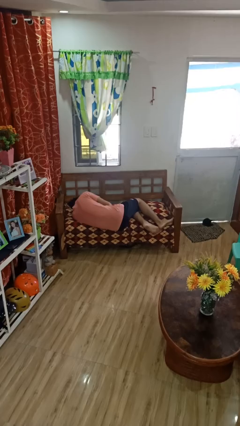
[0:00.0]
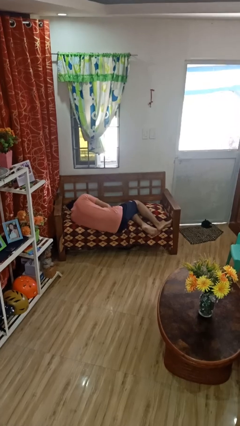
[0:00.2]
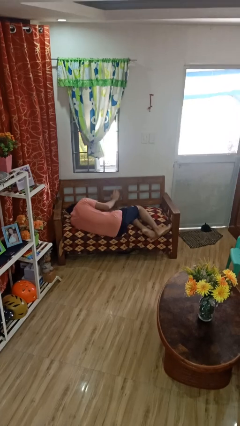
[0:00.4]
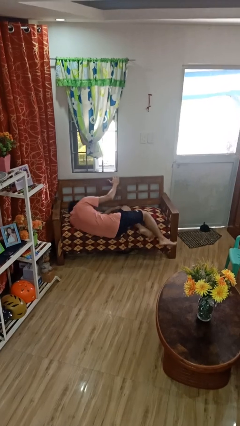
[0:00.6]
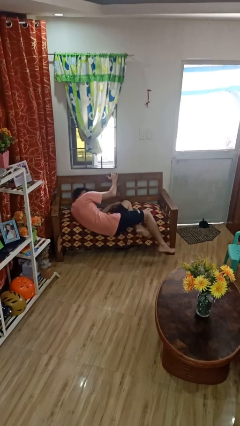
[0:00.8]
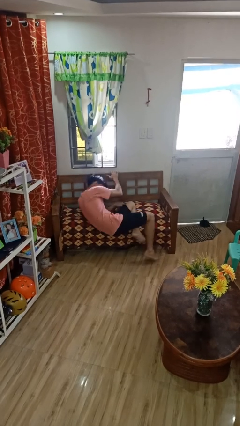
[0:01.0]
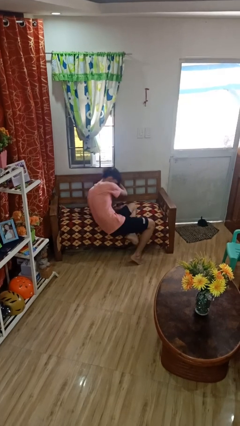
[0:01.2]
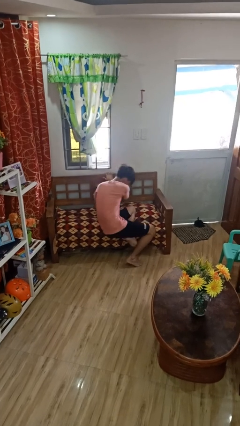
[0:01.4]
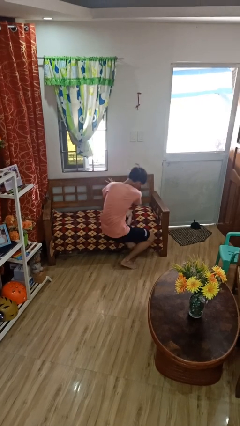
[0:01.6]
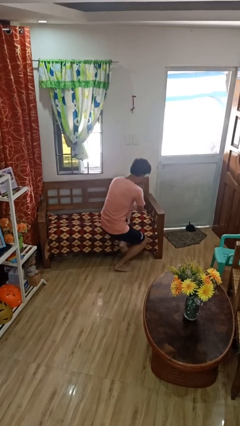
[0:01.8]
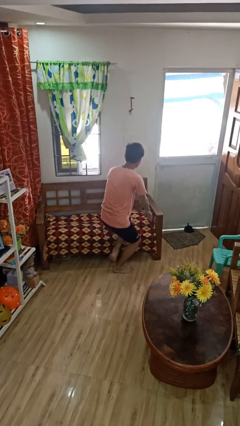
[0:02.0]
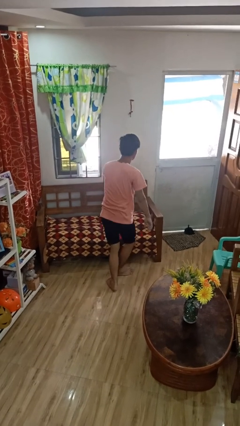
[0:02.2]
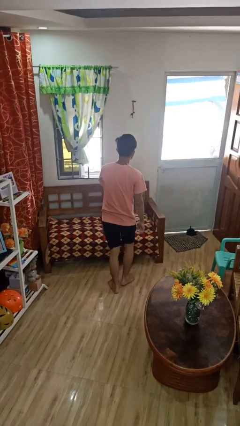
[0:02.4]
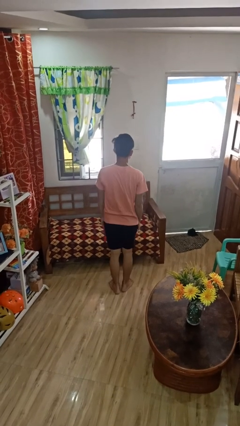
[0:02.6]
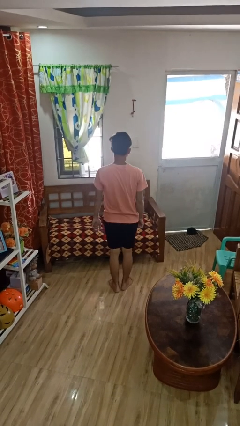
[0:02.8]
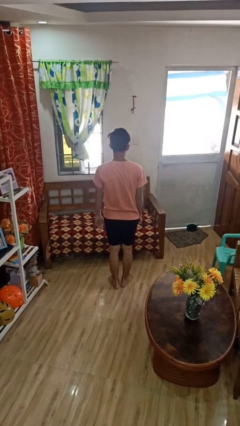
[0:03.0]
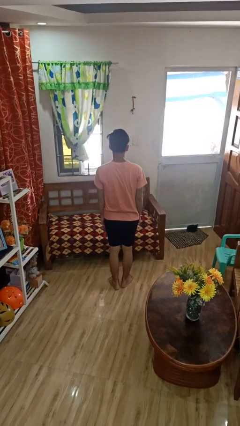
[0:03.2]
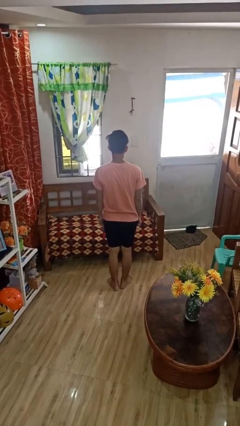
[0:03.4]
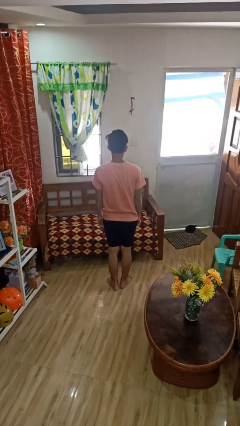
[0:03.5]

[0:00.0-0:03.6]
person stands up

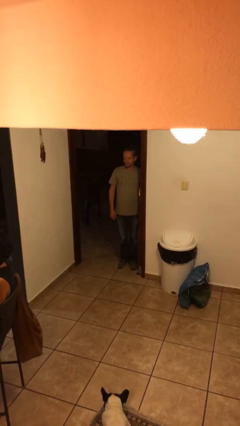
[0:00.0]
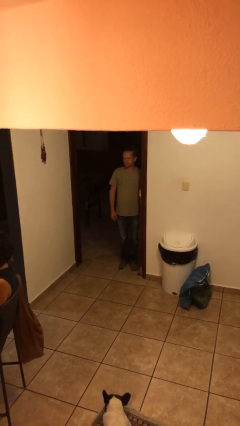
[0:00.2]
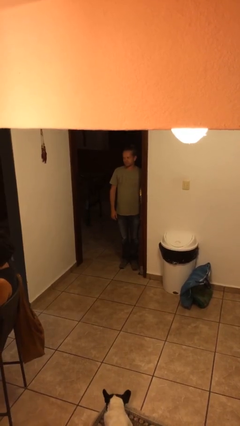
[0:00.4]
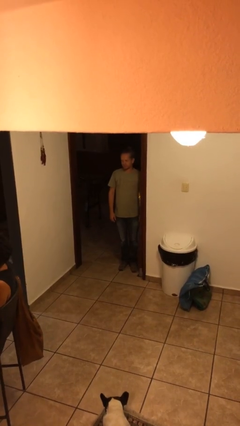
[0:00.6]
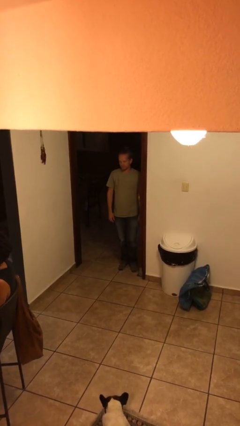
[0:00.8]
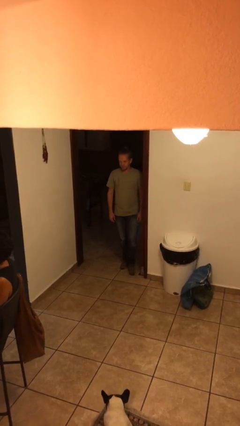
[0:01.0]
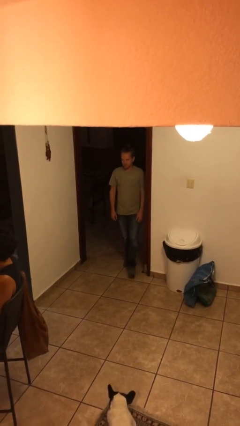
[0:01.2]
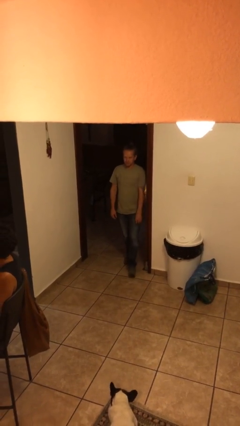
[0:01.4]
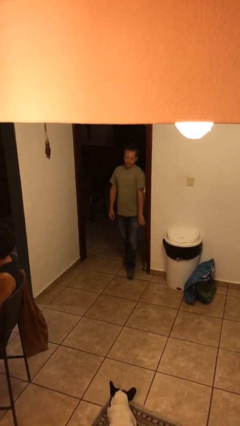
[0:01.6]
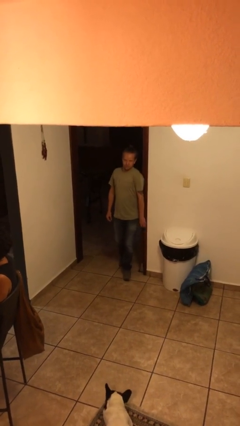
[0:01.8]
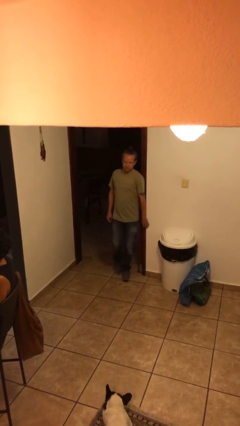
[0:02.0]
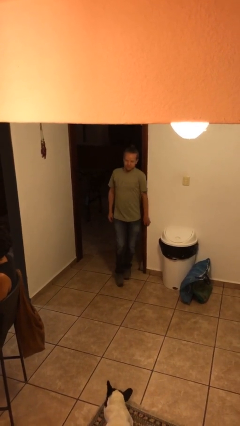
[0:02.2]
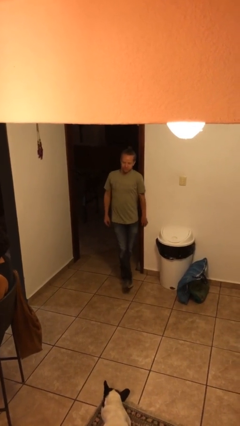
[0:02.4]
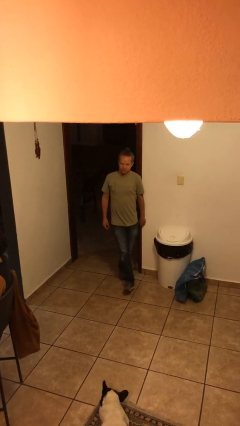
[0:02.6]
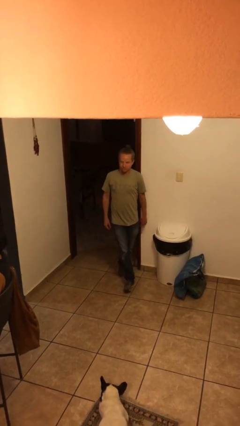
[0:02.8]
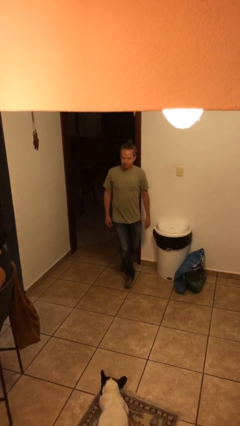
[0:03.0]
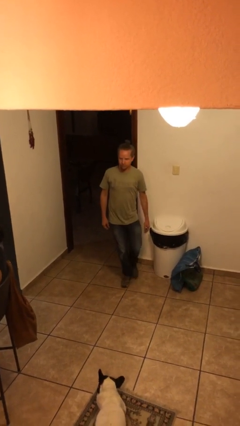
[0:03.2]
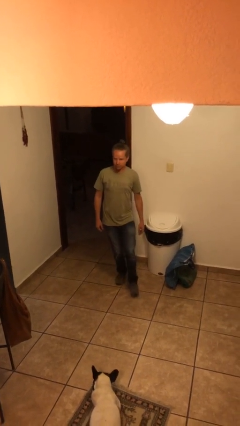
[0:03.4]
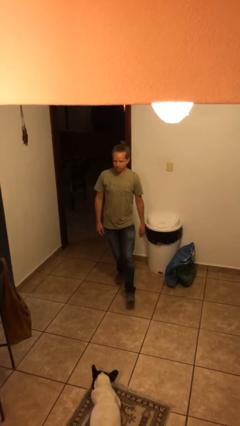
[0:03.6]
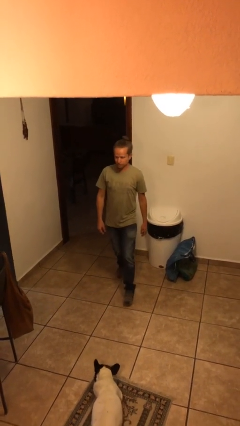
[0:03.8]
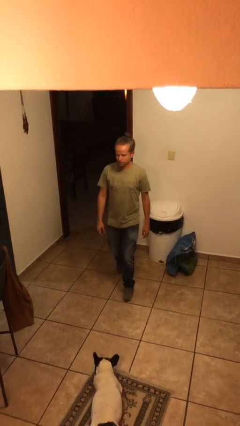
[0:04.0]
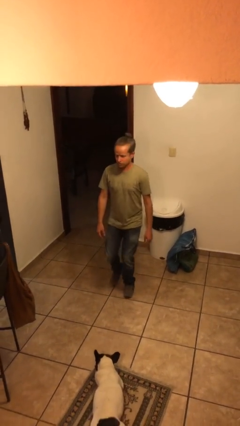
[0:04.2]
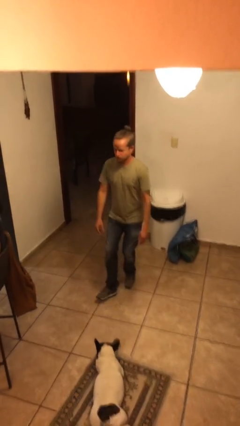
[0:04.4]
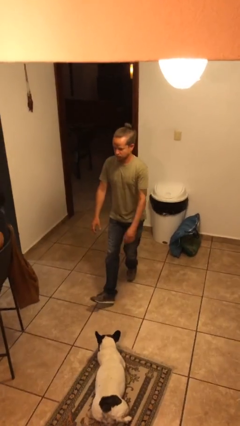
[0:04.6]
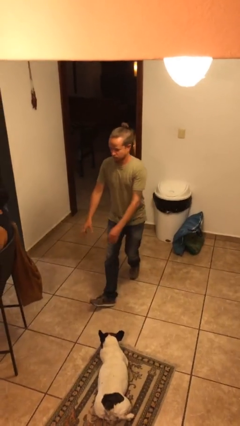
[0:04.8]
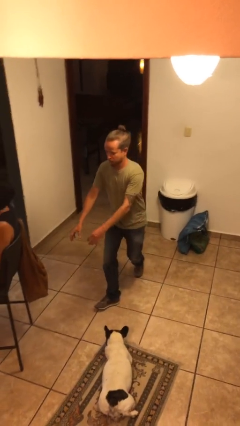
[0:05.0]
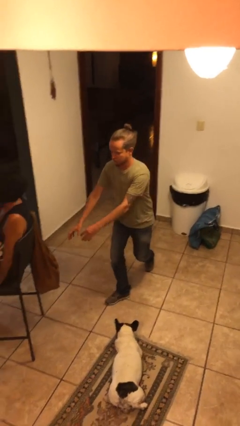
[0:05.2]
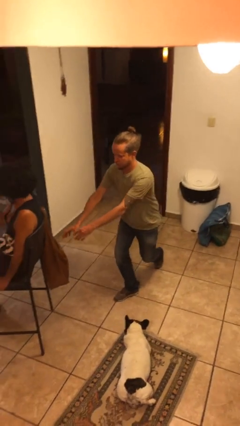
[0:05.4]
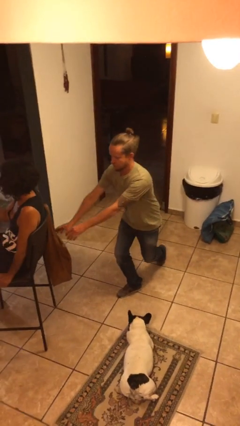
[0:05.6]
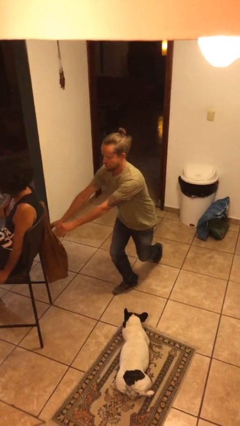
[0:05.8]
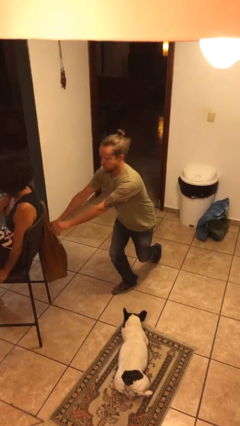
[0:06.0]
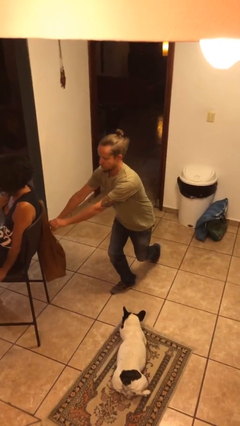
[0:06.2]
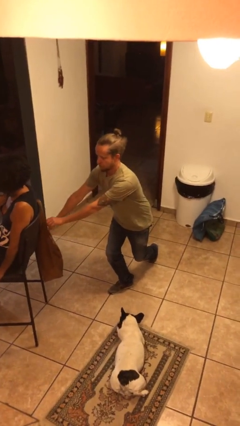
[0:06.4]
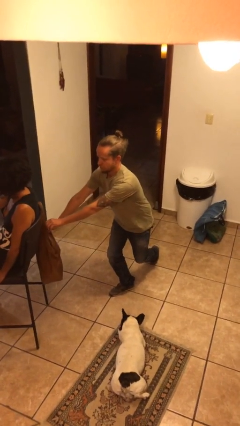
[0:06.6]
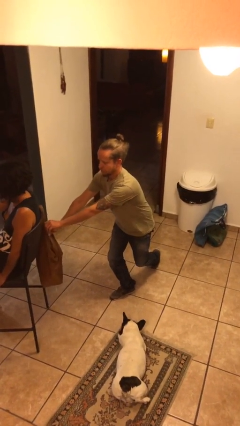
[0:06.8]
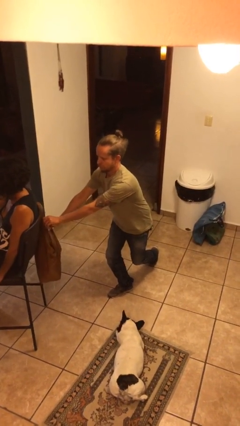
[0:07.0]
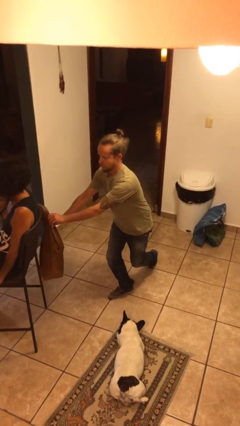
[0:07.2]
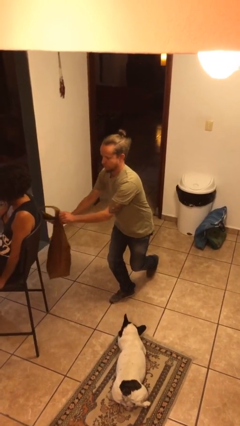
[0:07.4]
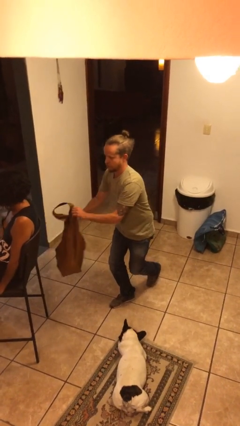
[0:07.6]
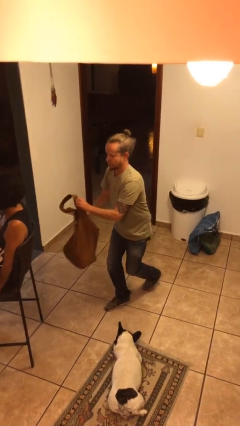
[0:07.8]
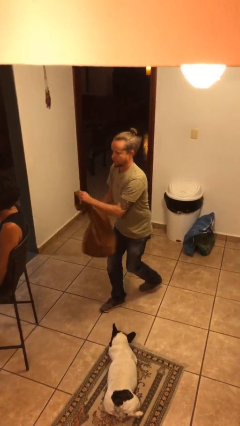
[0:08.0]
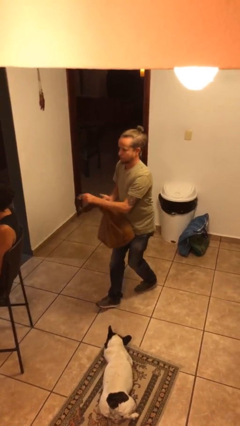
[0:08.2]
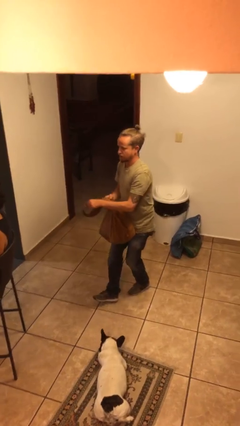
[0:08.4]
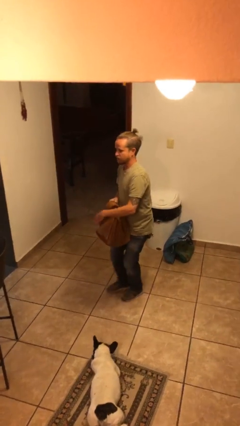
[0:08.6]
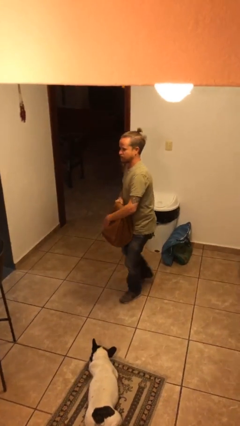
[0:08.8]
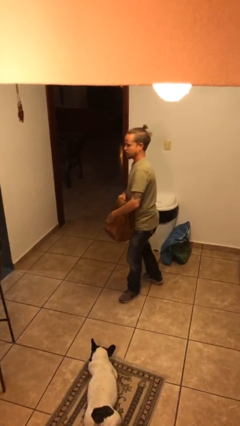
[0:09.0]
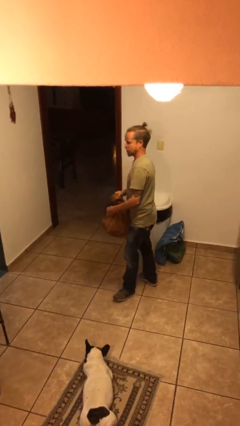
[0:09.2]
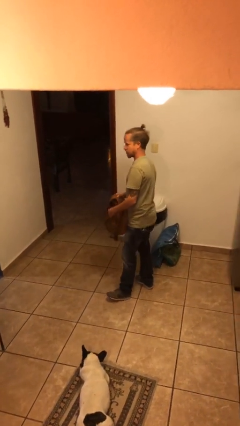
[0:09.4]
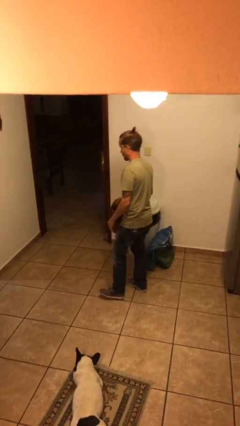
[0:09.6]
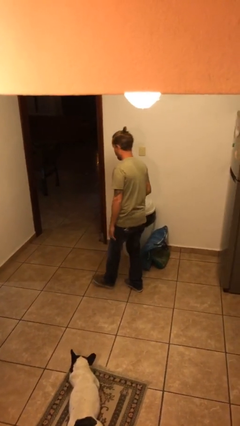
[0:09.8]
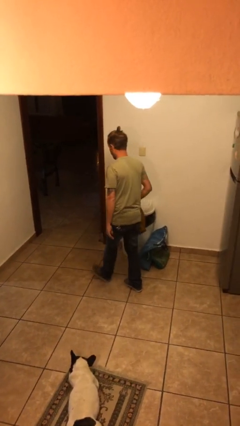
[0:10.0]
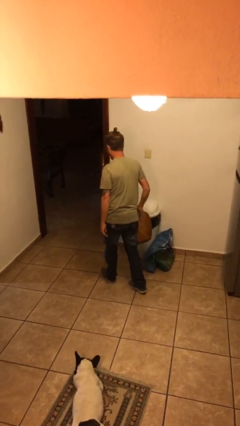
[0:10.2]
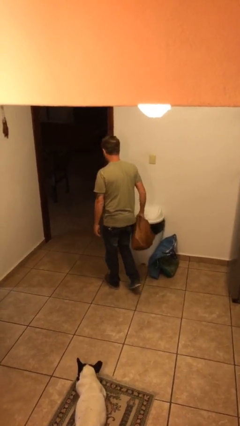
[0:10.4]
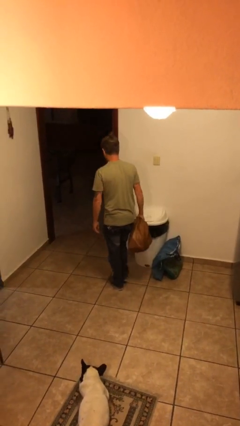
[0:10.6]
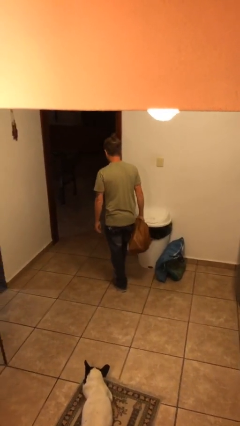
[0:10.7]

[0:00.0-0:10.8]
person steals object from person

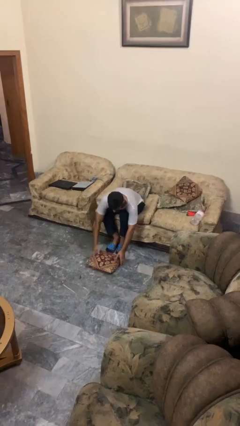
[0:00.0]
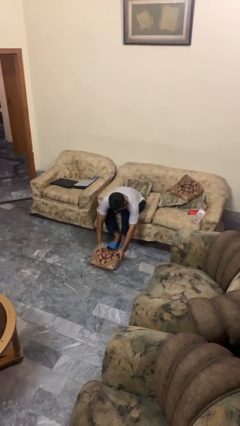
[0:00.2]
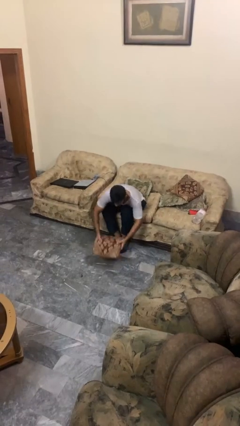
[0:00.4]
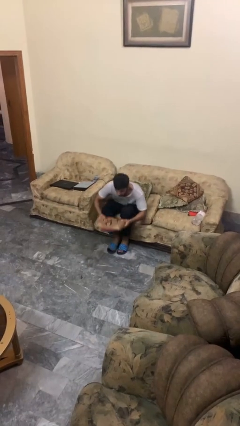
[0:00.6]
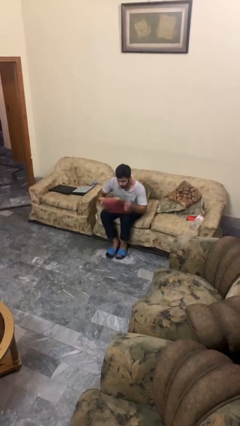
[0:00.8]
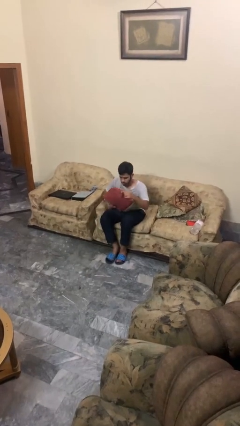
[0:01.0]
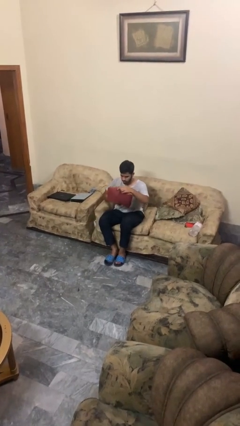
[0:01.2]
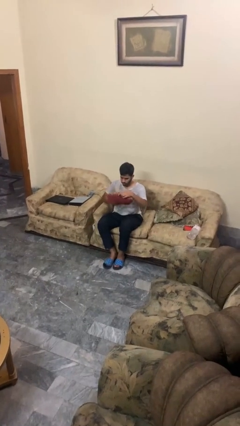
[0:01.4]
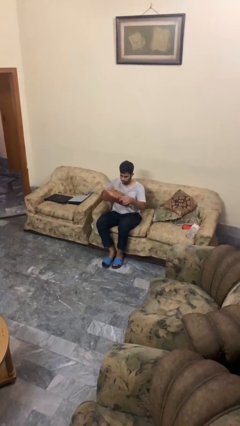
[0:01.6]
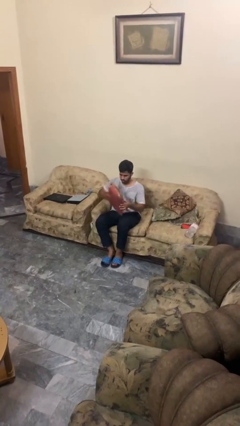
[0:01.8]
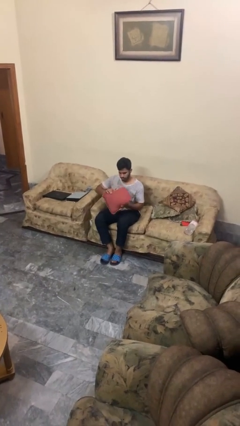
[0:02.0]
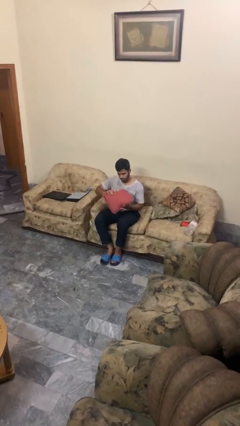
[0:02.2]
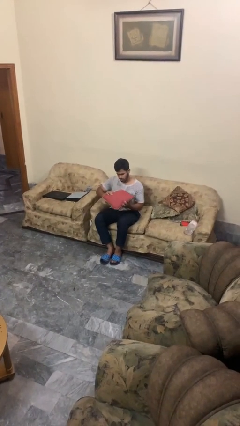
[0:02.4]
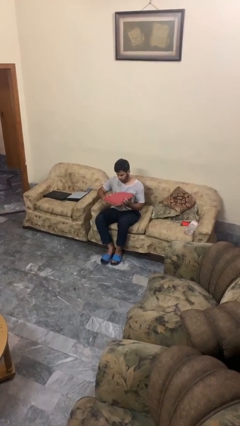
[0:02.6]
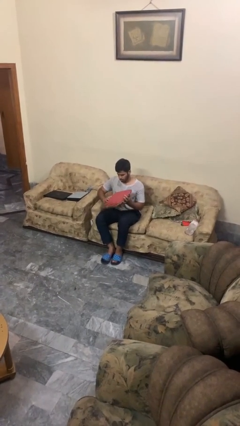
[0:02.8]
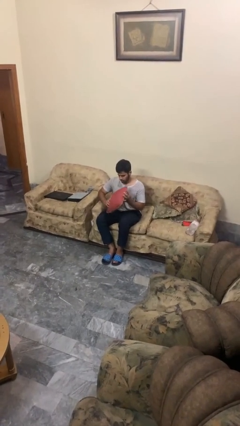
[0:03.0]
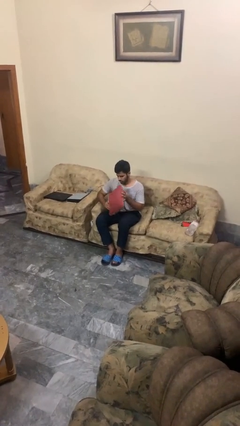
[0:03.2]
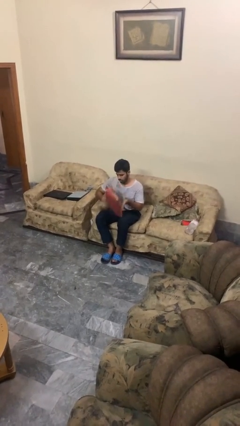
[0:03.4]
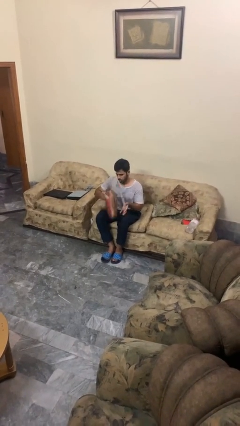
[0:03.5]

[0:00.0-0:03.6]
person picks up object from floor
